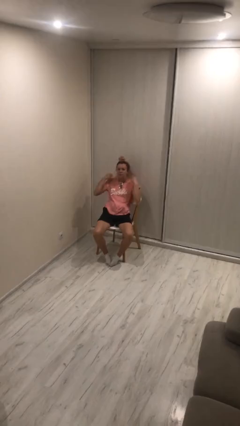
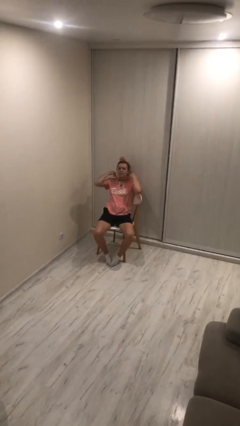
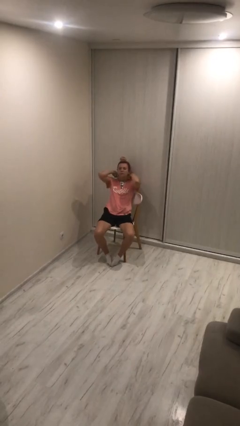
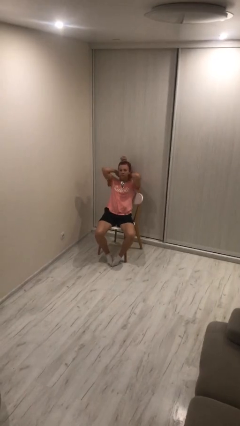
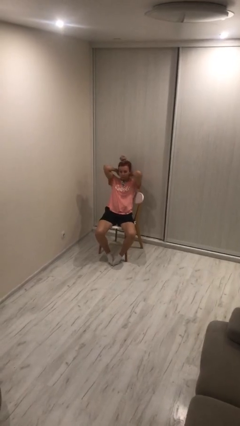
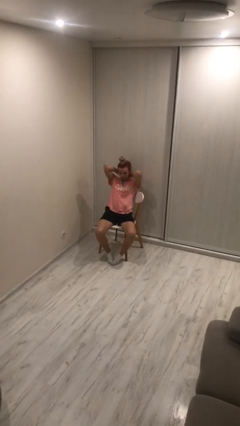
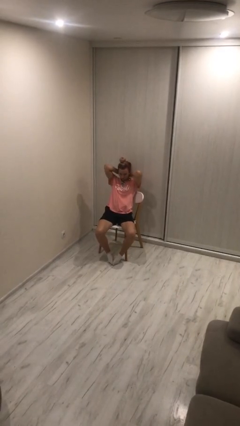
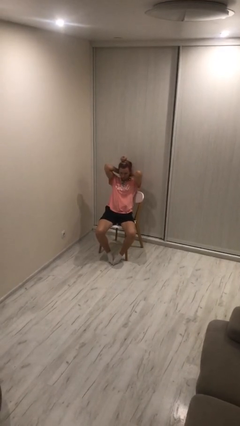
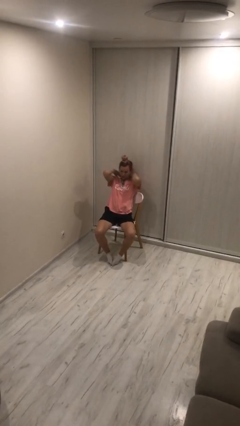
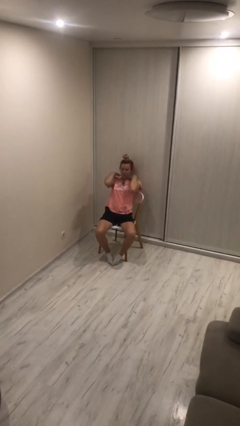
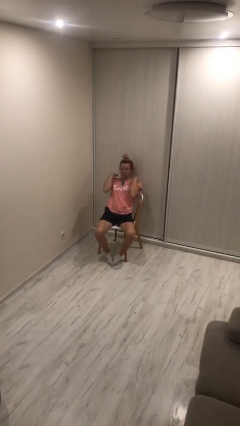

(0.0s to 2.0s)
person puts on necklace

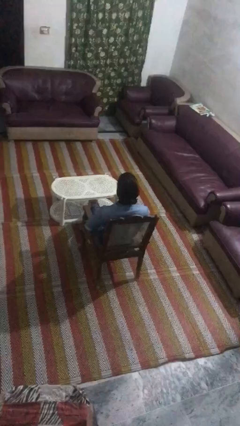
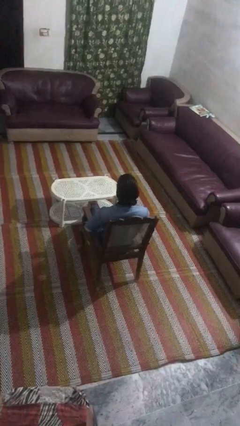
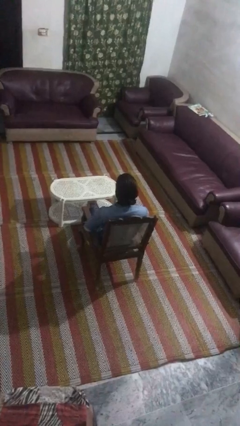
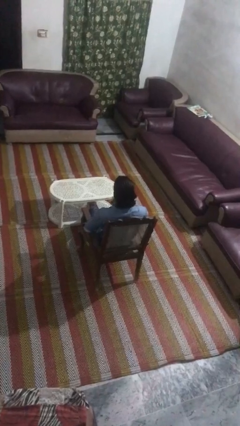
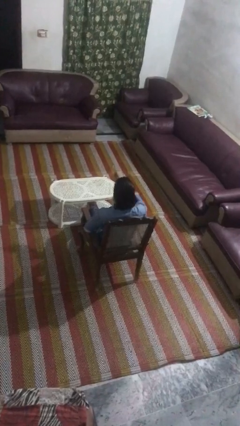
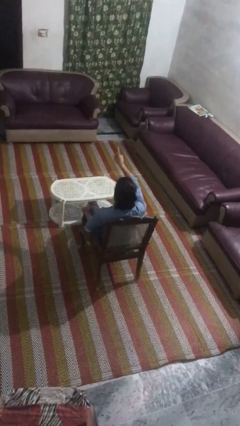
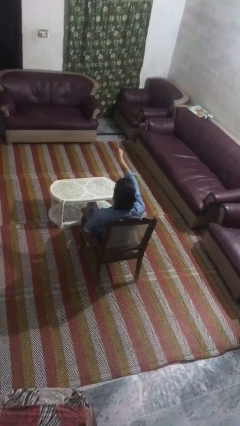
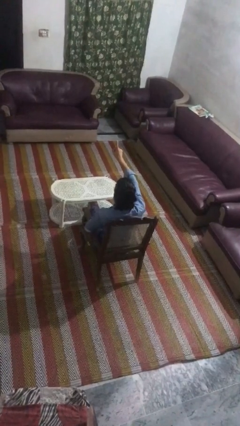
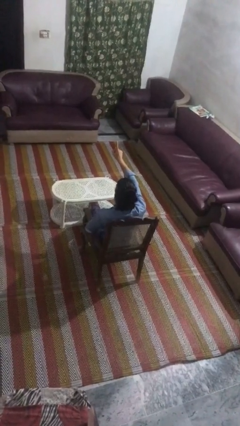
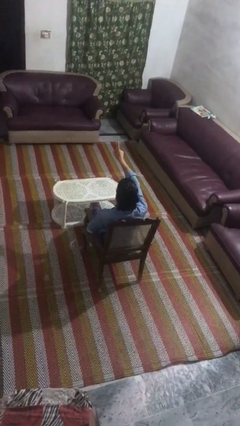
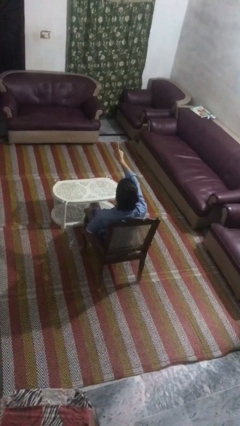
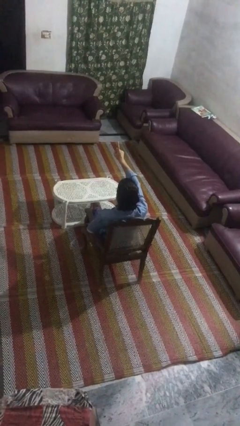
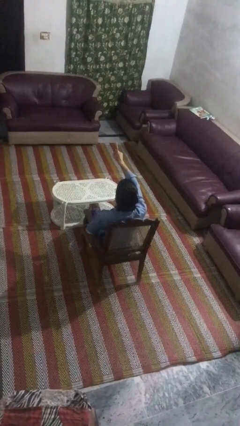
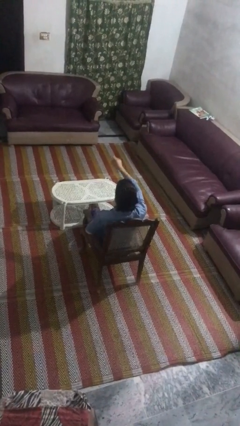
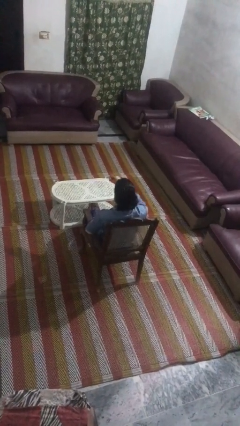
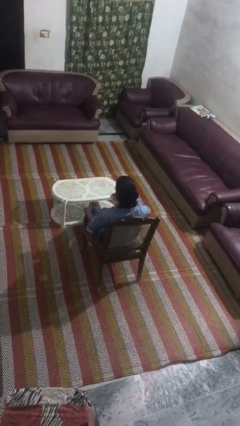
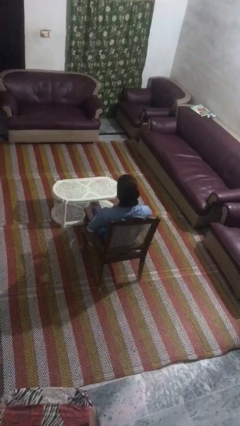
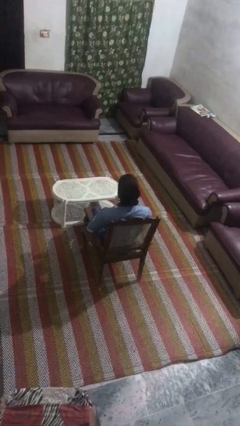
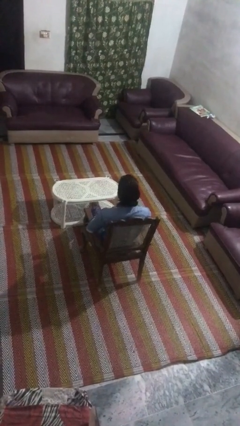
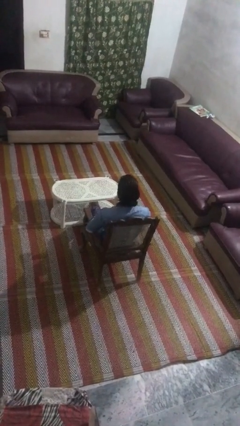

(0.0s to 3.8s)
person gestures number one

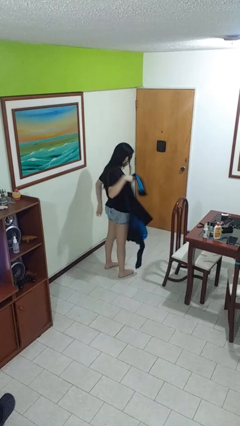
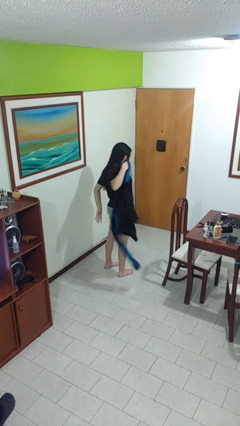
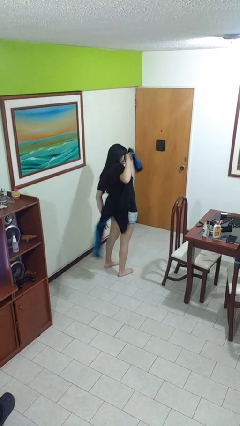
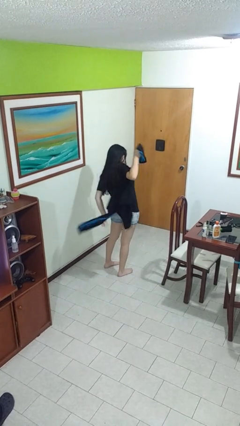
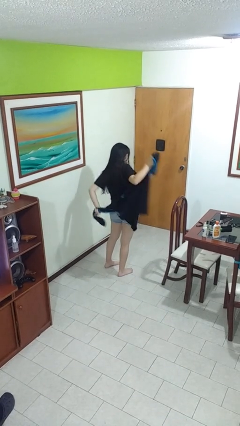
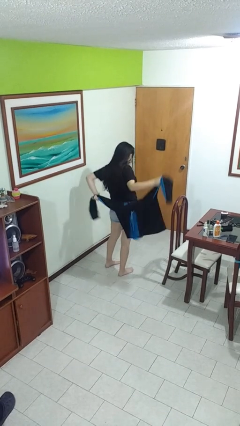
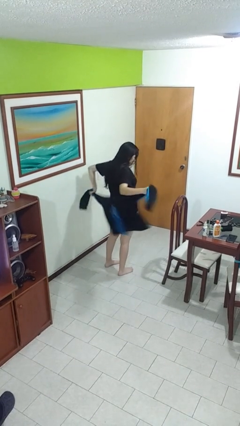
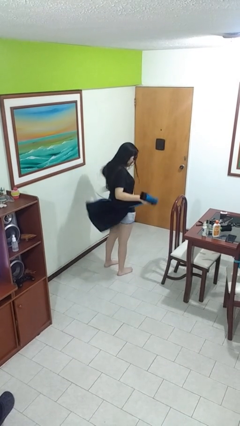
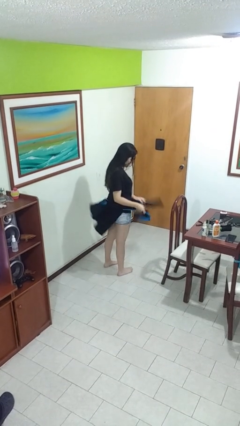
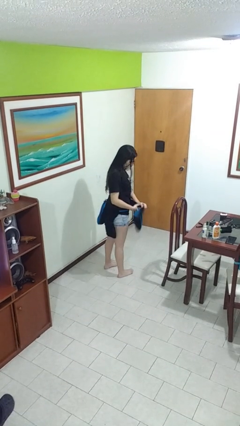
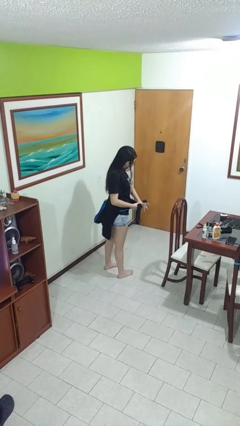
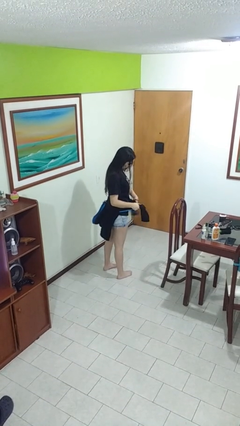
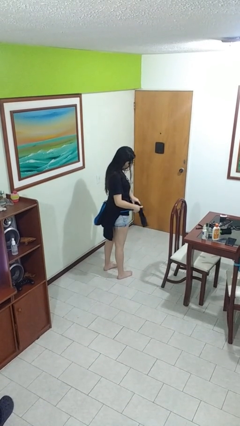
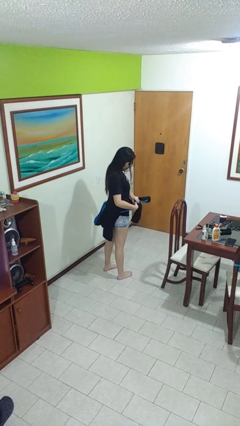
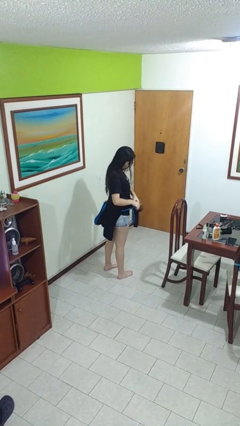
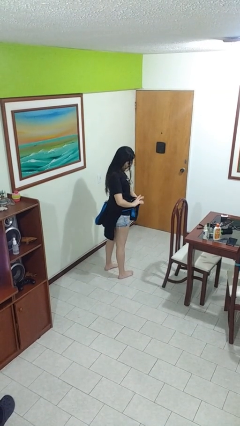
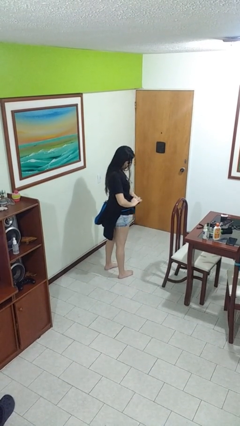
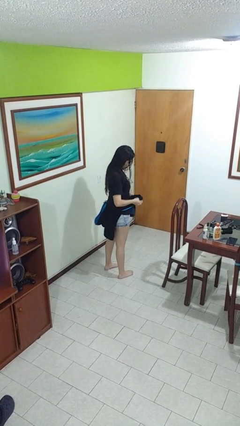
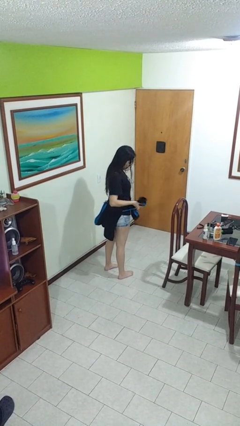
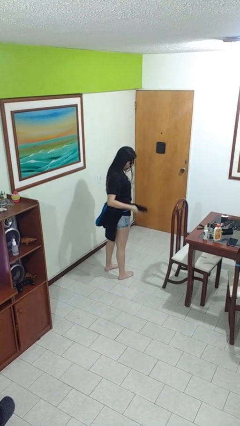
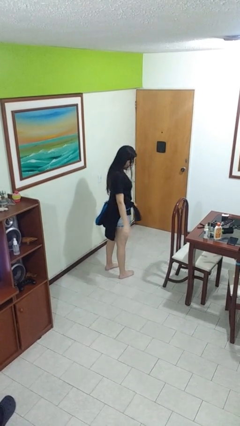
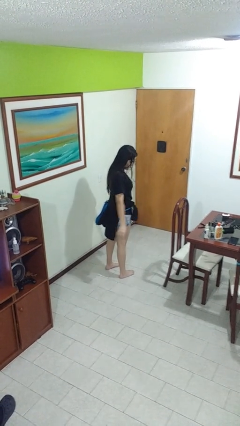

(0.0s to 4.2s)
person ties jacket around waist

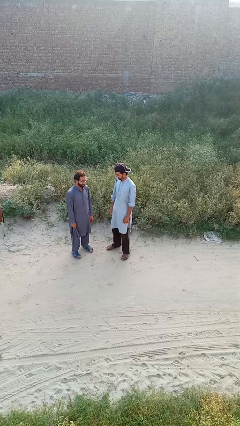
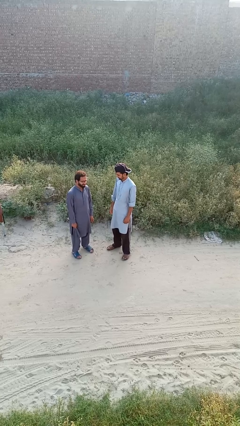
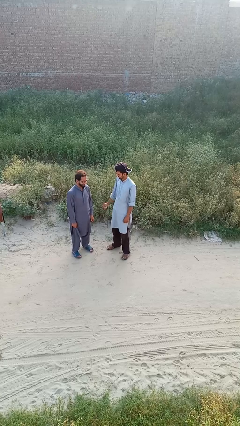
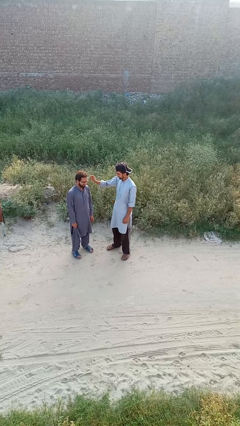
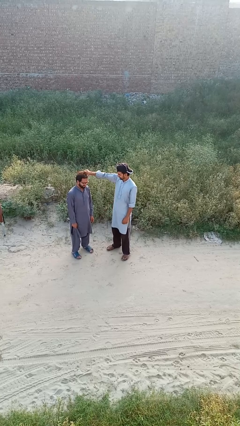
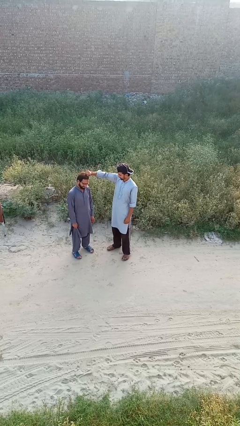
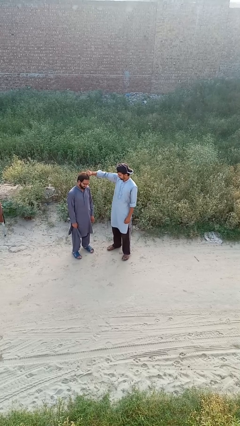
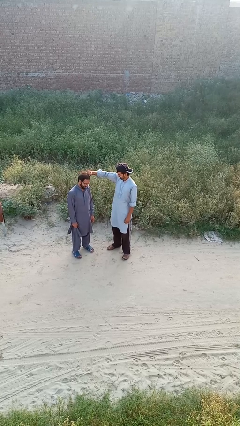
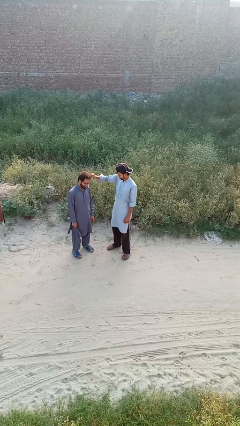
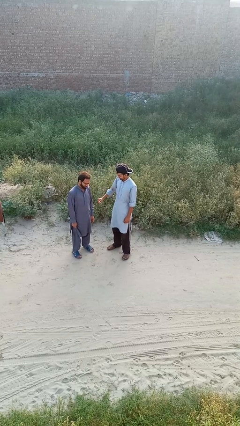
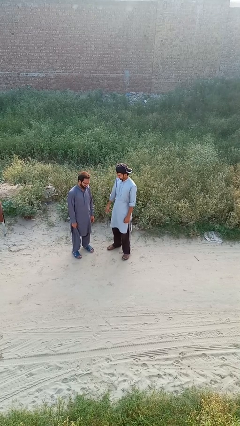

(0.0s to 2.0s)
person grabs person by hair

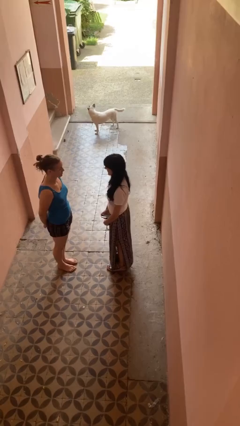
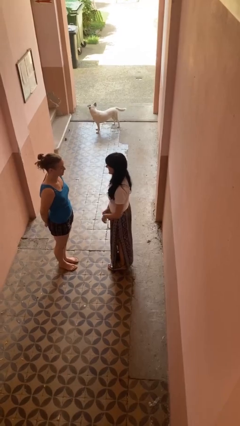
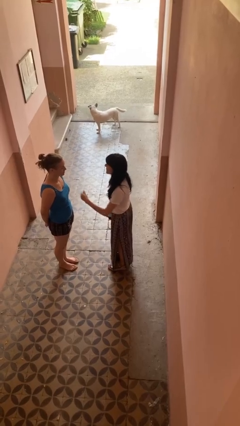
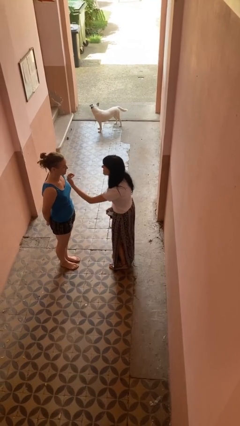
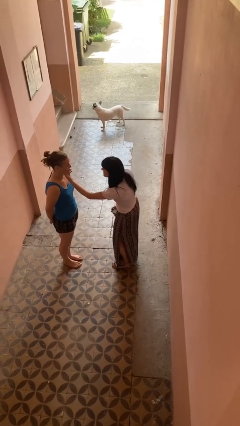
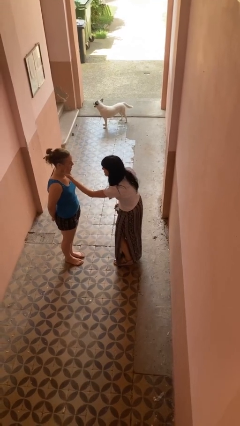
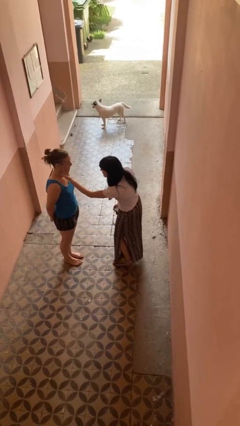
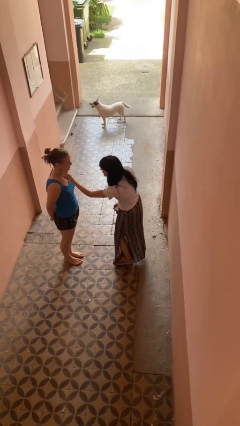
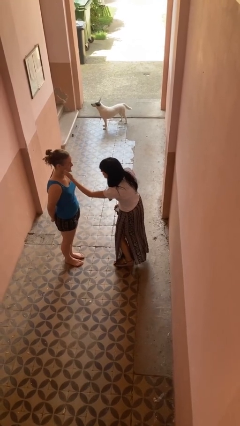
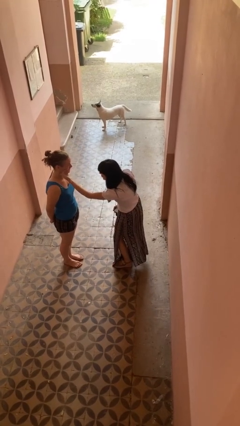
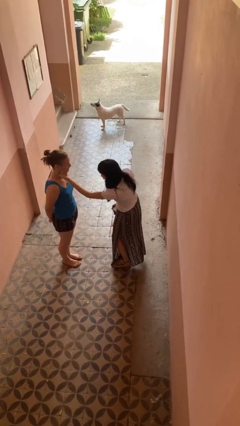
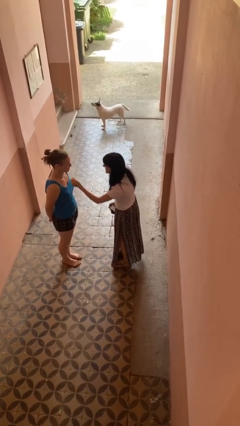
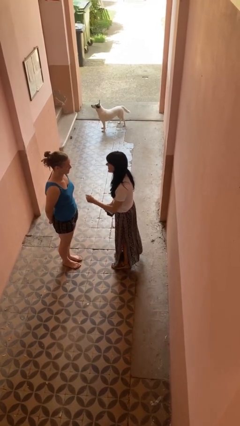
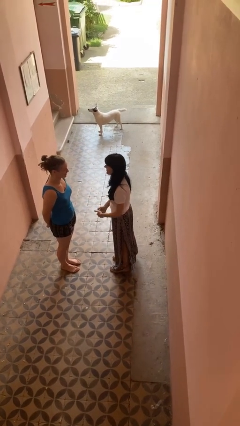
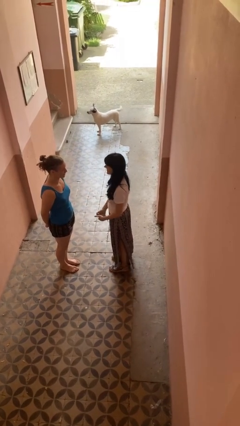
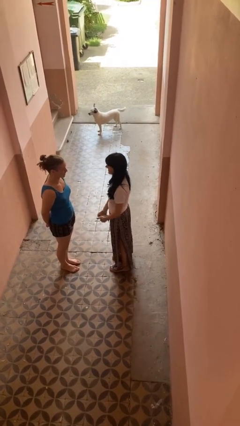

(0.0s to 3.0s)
person touches face of person

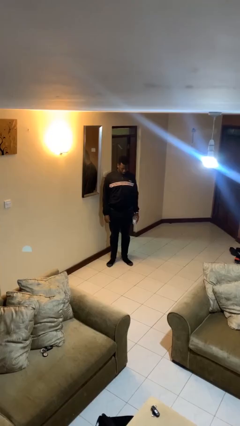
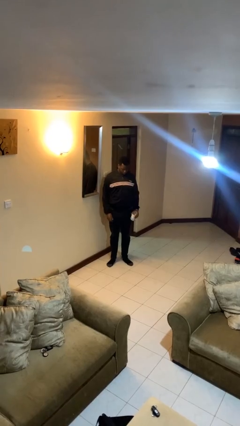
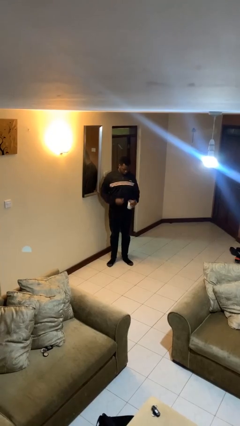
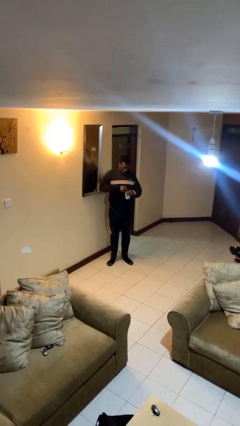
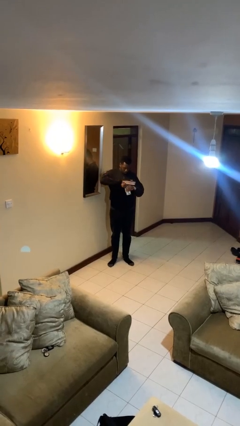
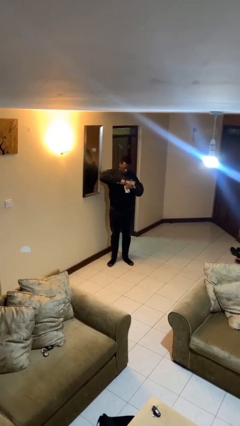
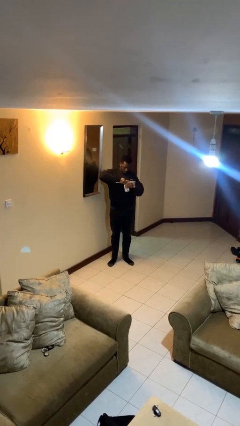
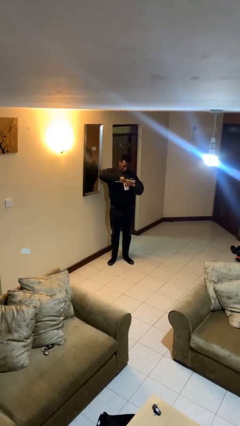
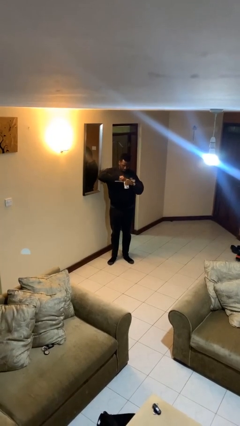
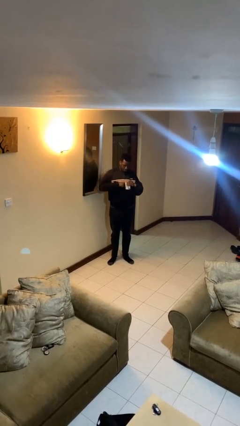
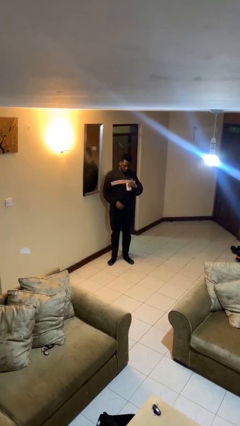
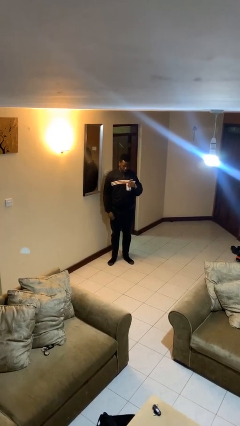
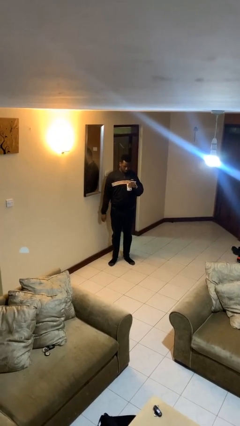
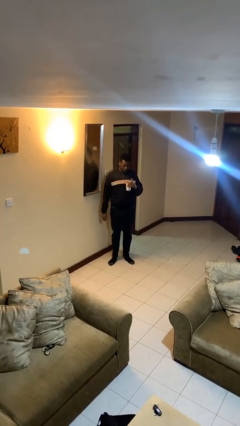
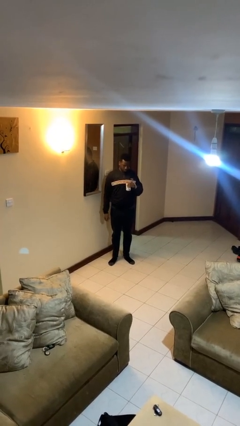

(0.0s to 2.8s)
person opens beverage can
